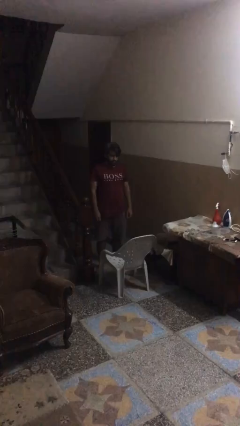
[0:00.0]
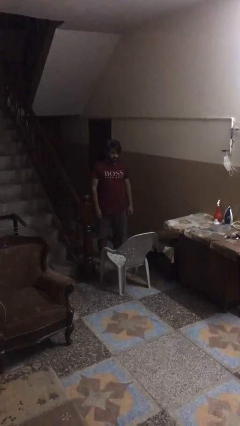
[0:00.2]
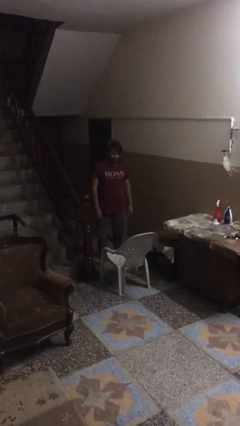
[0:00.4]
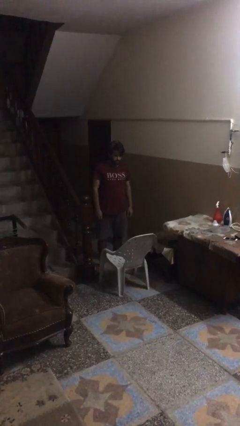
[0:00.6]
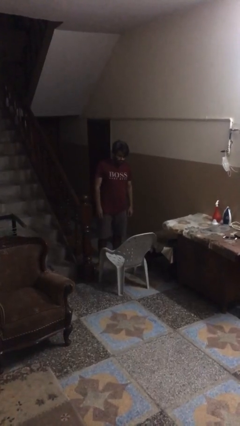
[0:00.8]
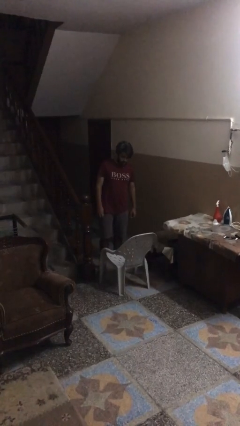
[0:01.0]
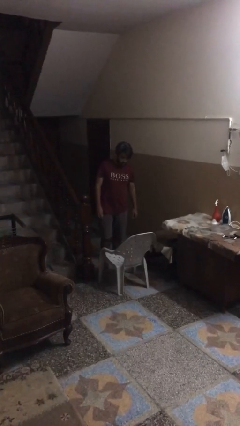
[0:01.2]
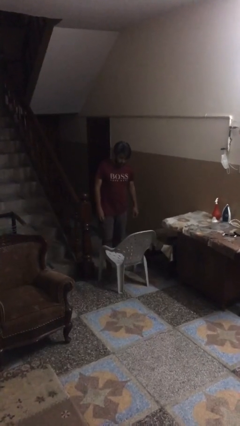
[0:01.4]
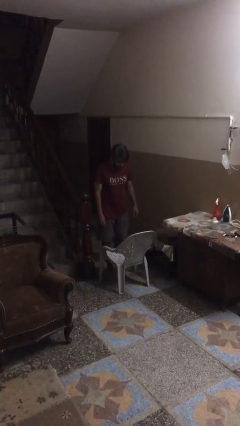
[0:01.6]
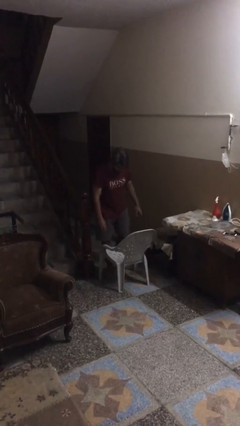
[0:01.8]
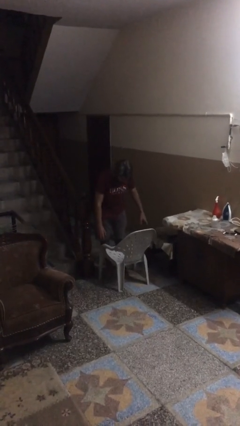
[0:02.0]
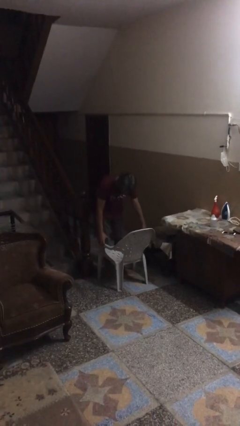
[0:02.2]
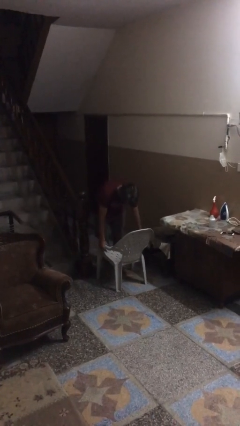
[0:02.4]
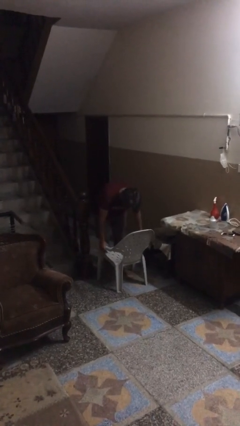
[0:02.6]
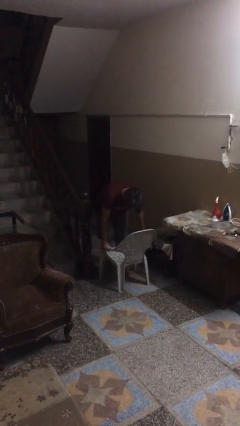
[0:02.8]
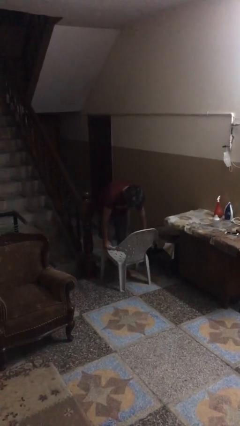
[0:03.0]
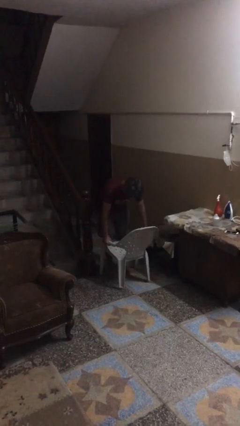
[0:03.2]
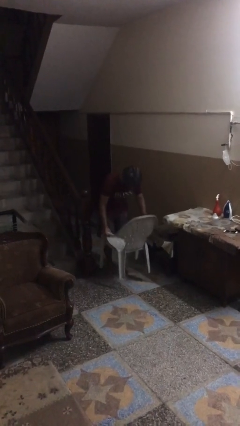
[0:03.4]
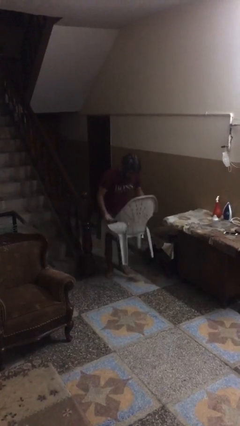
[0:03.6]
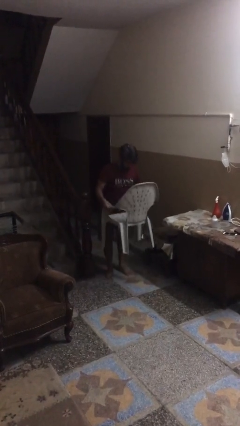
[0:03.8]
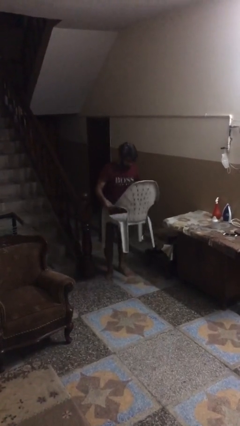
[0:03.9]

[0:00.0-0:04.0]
person picks up object from floor

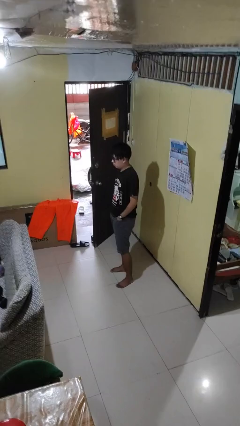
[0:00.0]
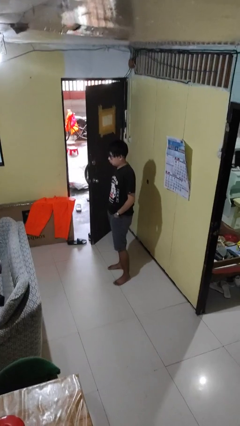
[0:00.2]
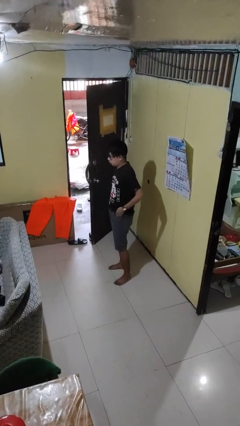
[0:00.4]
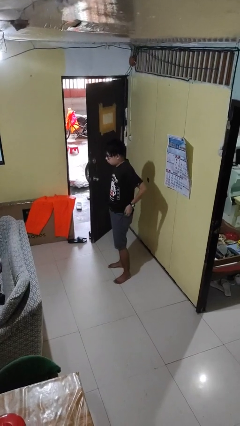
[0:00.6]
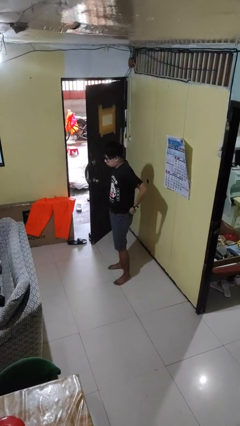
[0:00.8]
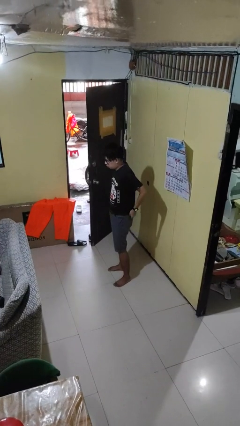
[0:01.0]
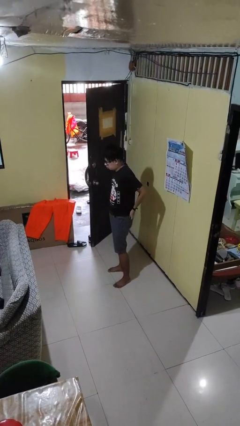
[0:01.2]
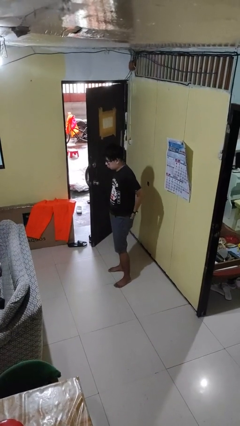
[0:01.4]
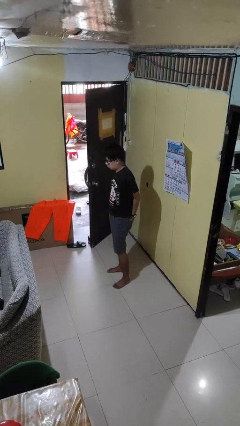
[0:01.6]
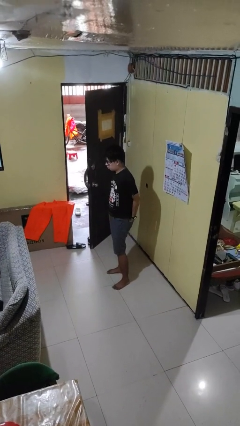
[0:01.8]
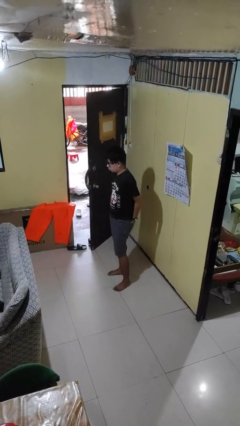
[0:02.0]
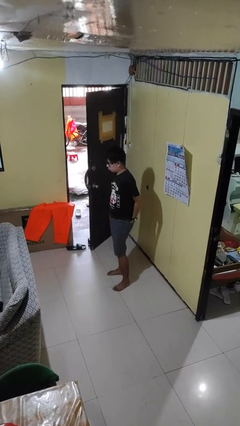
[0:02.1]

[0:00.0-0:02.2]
person puts hands in back pockets

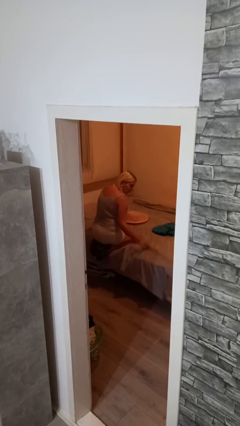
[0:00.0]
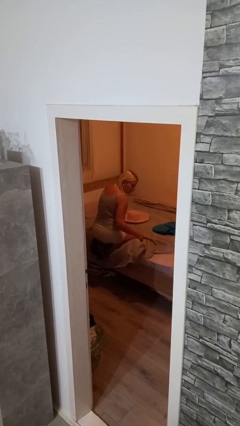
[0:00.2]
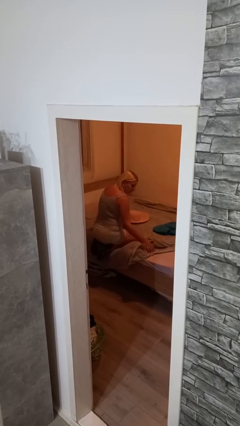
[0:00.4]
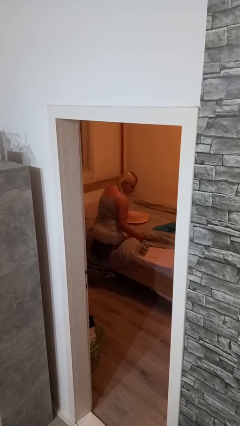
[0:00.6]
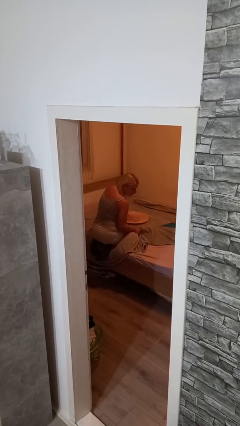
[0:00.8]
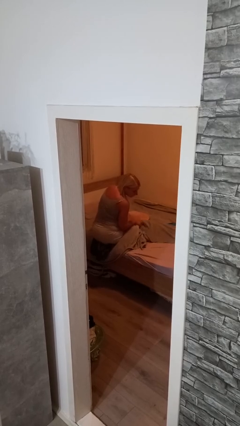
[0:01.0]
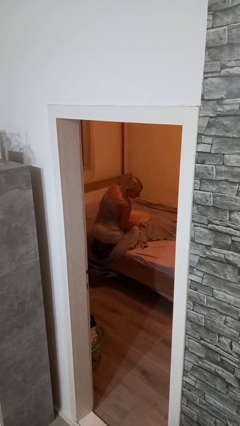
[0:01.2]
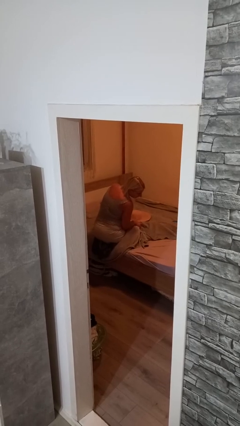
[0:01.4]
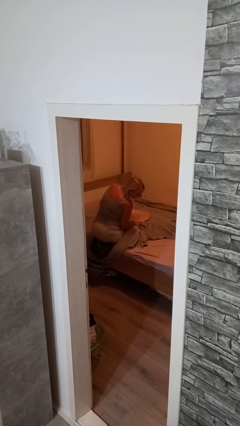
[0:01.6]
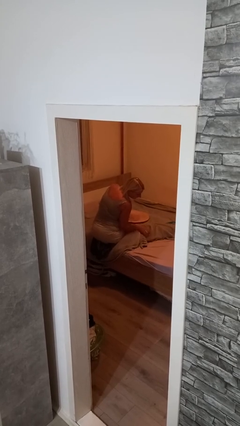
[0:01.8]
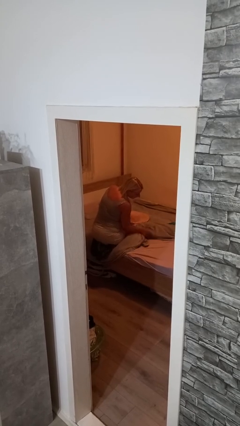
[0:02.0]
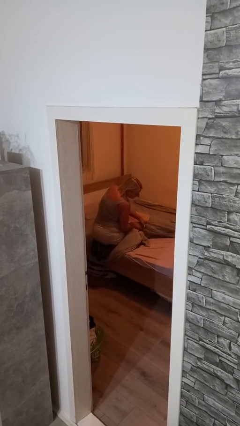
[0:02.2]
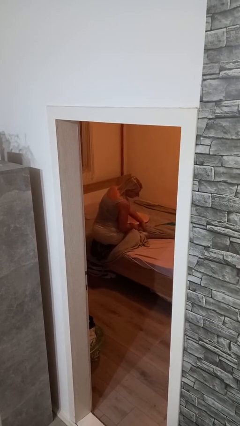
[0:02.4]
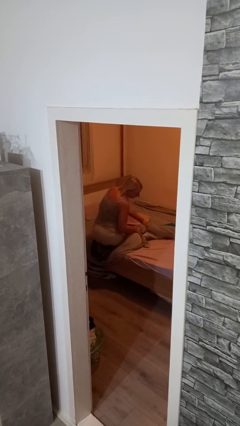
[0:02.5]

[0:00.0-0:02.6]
person searches under bed

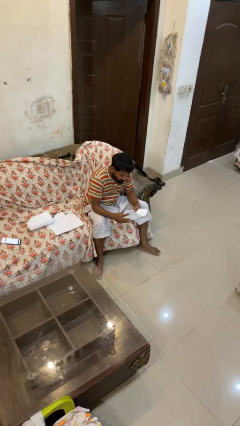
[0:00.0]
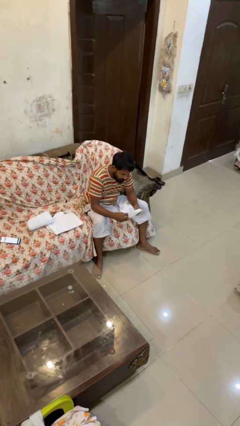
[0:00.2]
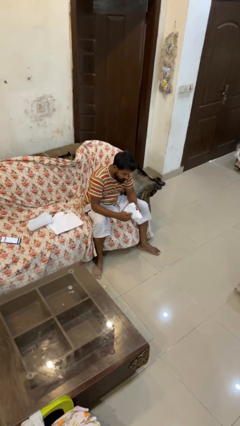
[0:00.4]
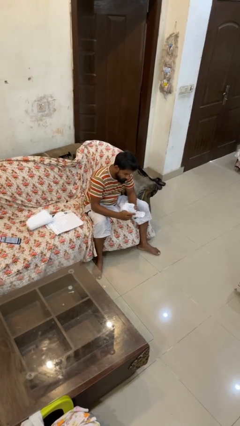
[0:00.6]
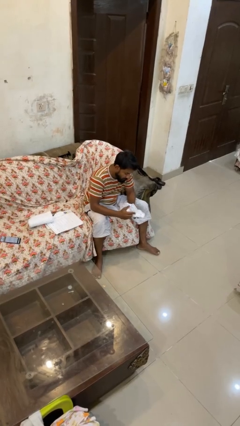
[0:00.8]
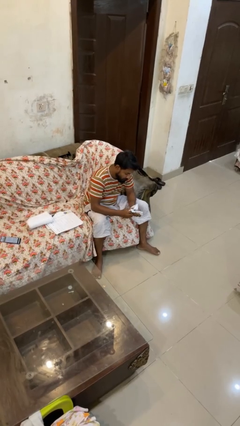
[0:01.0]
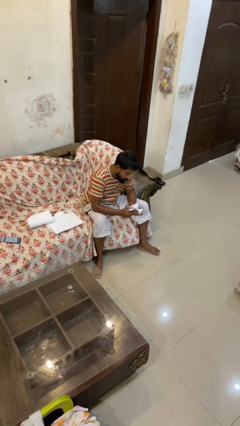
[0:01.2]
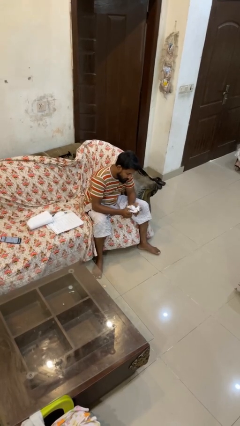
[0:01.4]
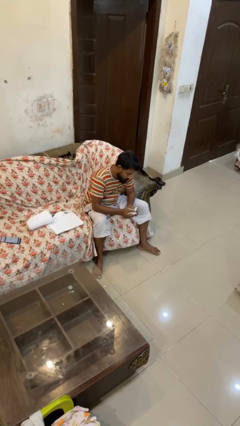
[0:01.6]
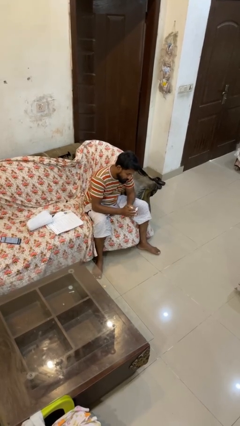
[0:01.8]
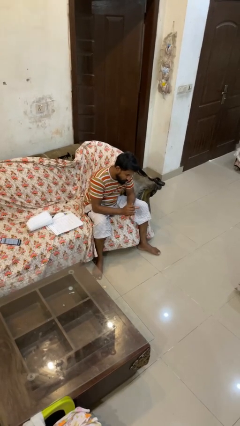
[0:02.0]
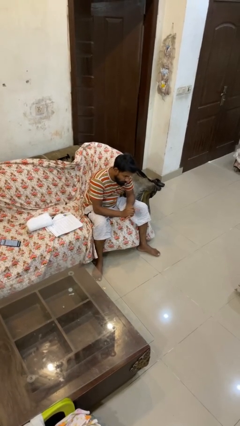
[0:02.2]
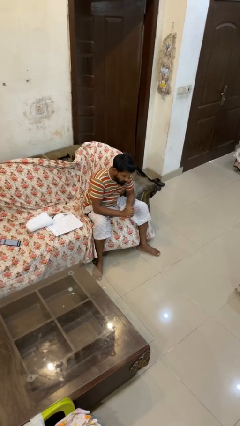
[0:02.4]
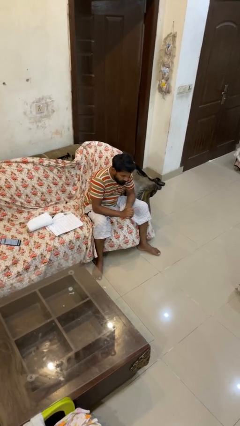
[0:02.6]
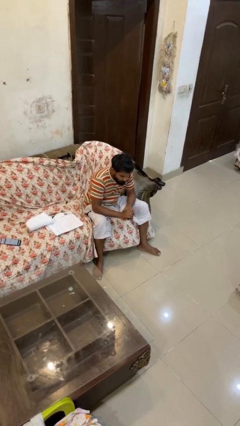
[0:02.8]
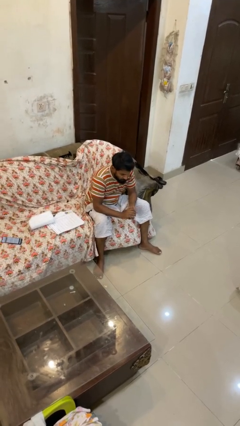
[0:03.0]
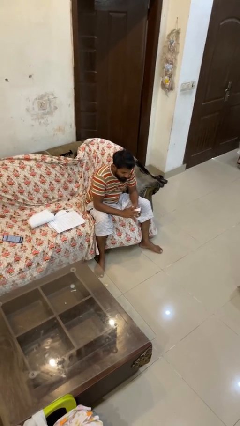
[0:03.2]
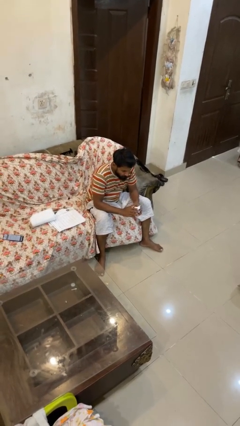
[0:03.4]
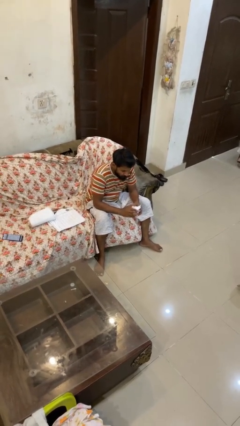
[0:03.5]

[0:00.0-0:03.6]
person crumples paper

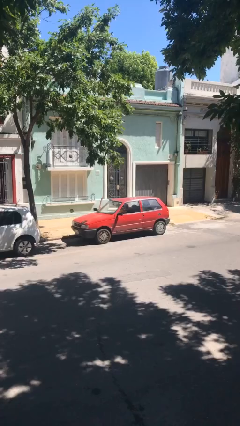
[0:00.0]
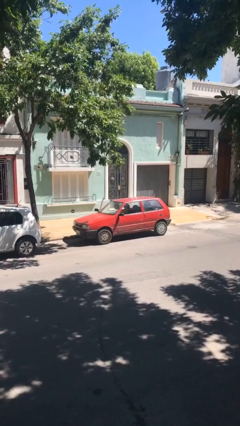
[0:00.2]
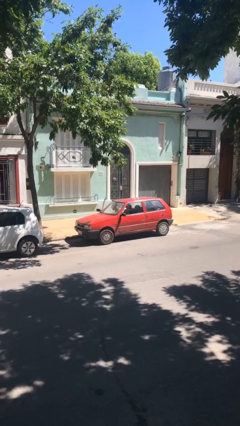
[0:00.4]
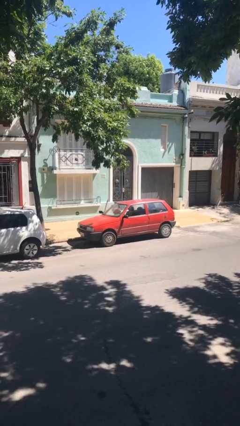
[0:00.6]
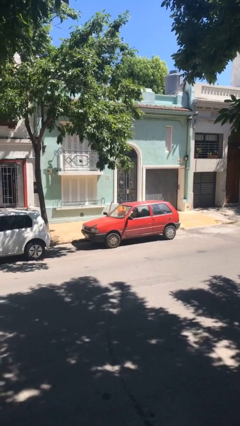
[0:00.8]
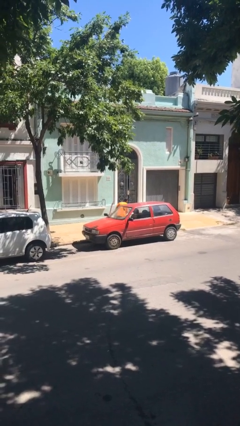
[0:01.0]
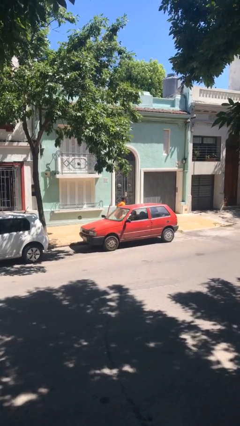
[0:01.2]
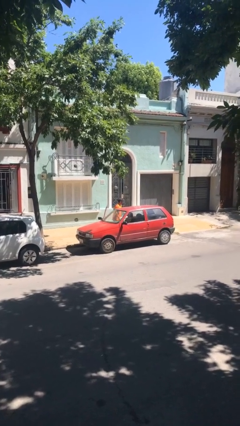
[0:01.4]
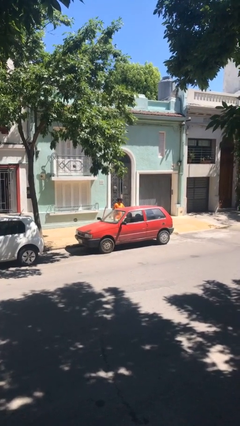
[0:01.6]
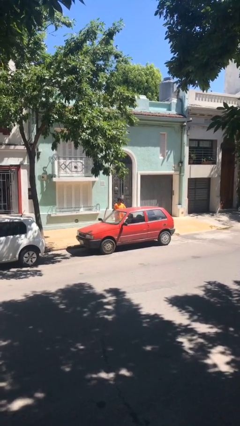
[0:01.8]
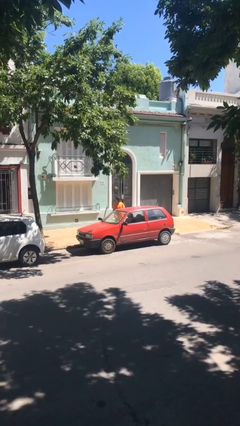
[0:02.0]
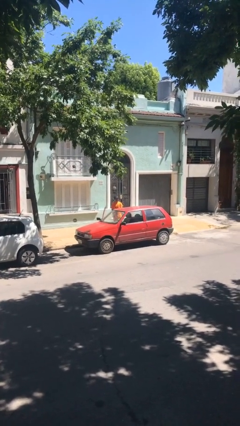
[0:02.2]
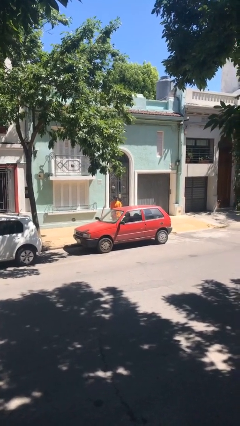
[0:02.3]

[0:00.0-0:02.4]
person exits car

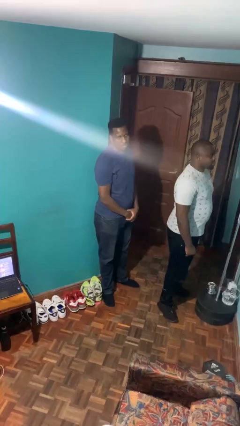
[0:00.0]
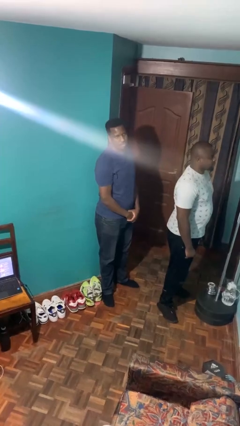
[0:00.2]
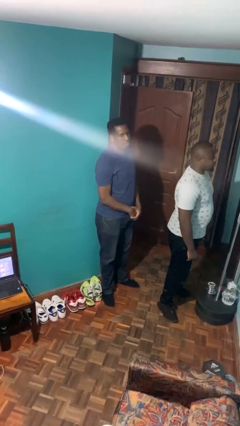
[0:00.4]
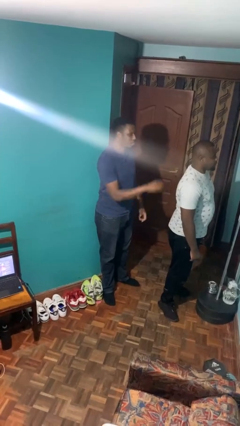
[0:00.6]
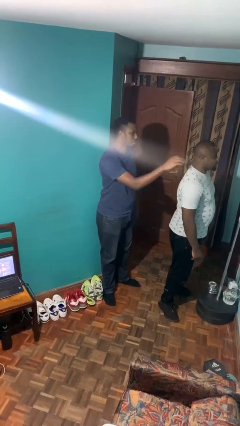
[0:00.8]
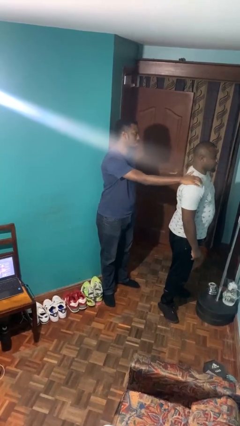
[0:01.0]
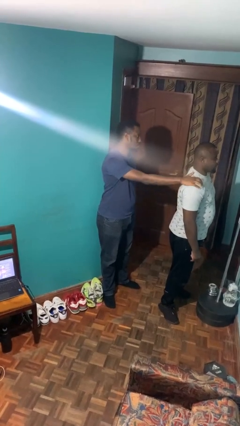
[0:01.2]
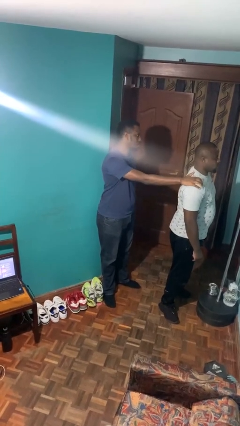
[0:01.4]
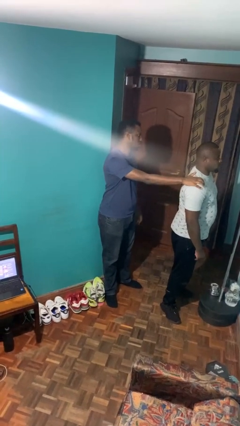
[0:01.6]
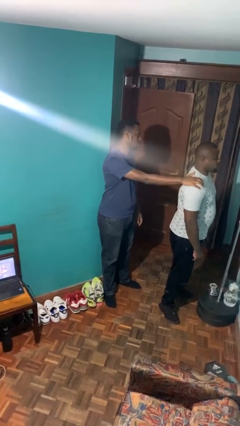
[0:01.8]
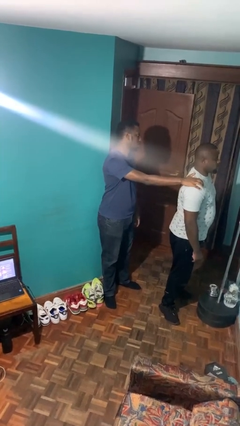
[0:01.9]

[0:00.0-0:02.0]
person grabs person by shoulder

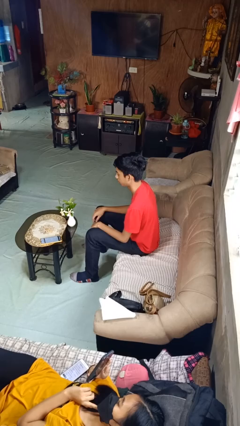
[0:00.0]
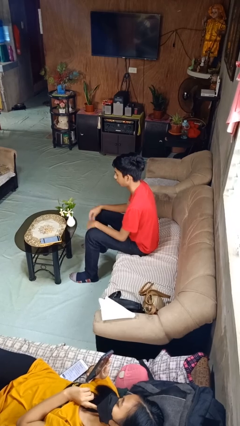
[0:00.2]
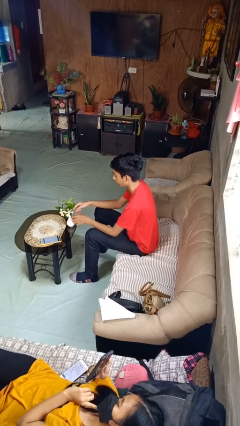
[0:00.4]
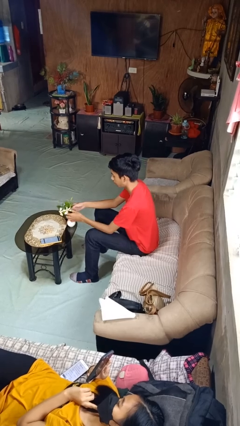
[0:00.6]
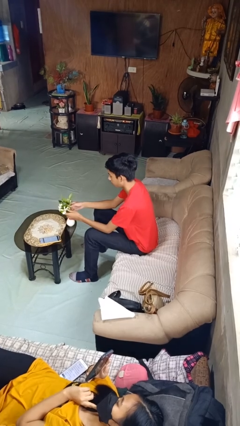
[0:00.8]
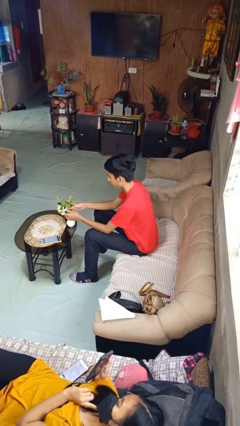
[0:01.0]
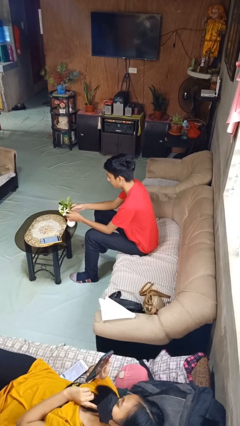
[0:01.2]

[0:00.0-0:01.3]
person arranges flowers in vase
